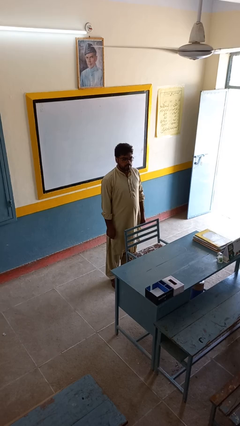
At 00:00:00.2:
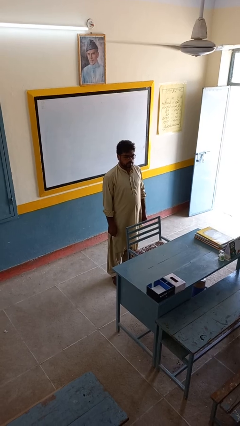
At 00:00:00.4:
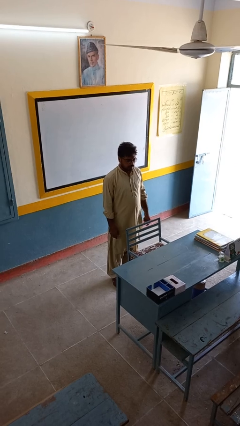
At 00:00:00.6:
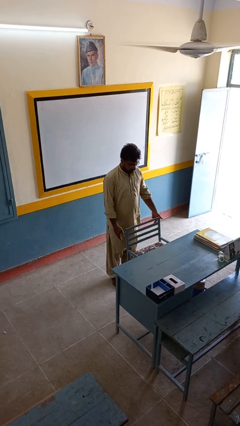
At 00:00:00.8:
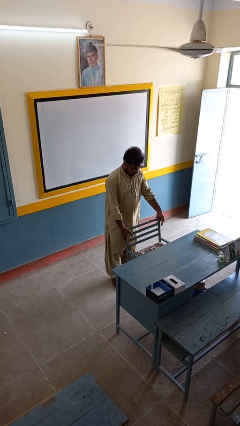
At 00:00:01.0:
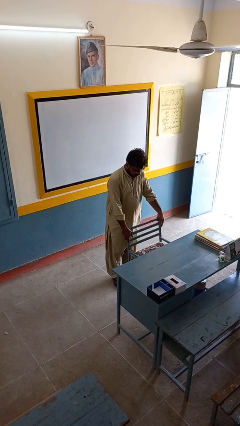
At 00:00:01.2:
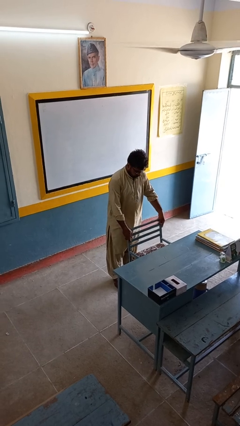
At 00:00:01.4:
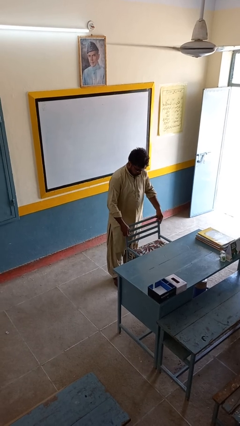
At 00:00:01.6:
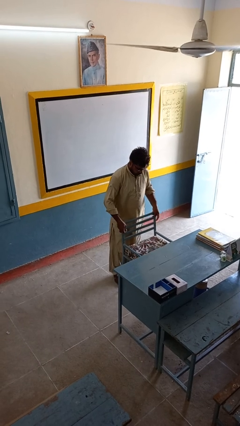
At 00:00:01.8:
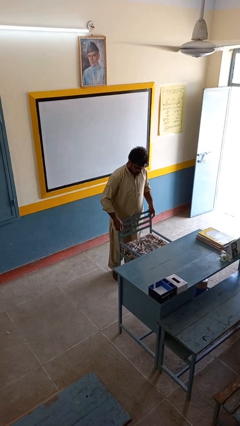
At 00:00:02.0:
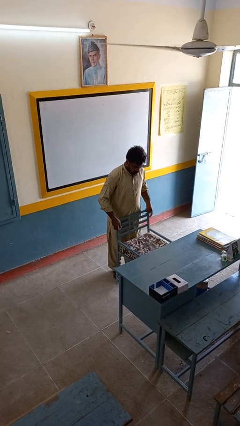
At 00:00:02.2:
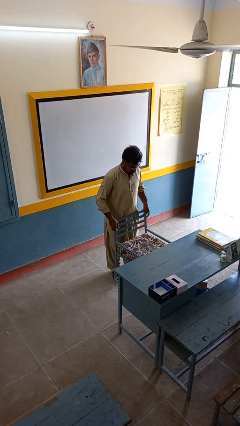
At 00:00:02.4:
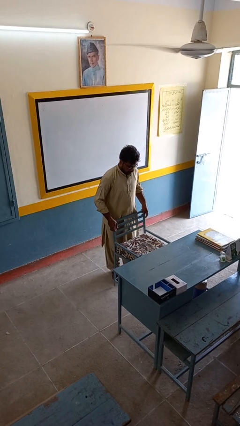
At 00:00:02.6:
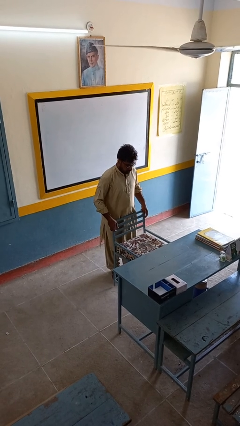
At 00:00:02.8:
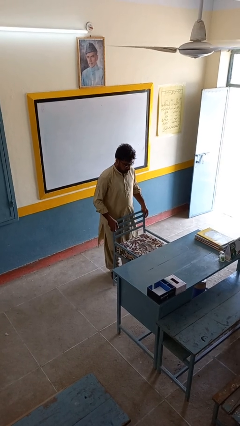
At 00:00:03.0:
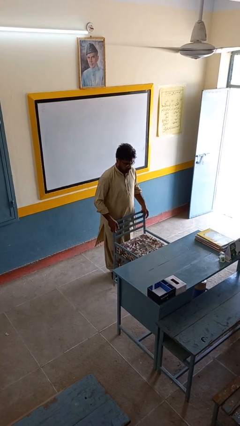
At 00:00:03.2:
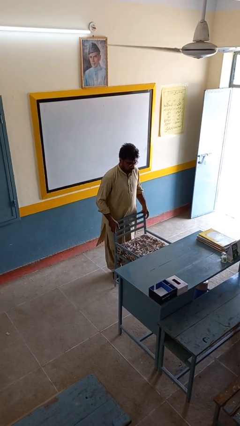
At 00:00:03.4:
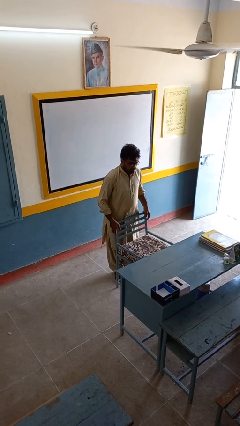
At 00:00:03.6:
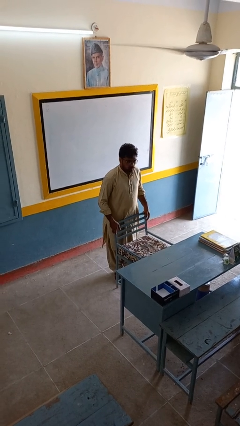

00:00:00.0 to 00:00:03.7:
person pulls out chair

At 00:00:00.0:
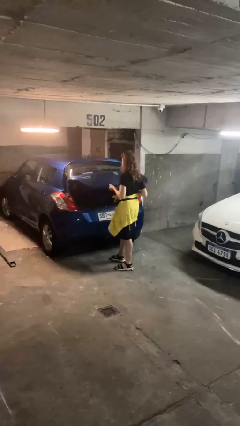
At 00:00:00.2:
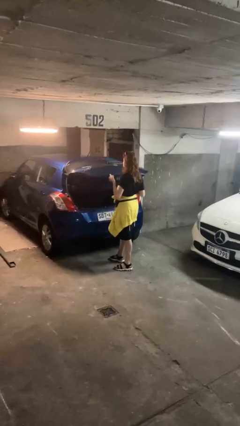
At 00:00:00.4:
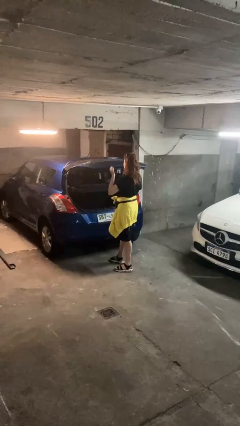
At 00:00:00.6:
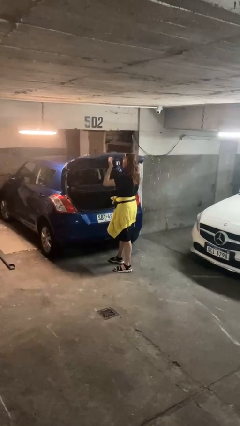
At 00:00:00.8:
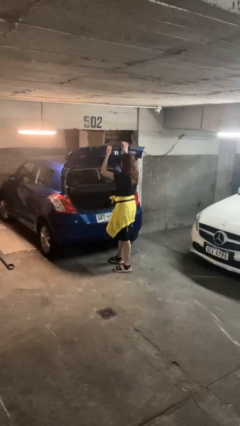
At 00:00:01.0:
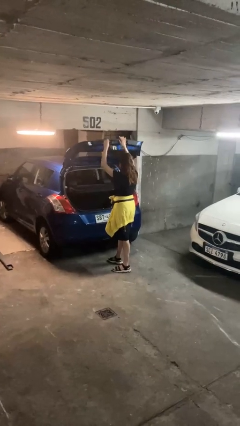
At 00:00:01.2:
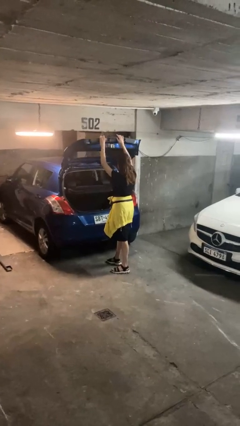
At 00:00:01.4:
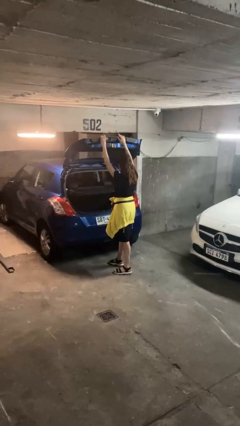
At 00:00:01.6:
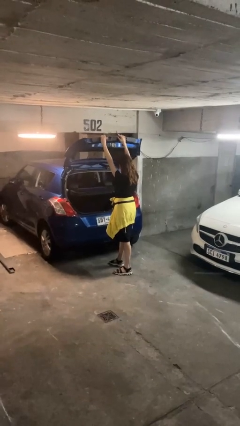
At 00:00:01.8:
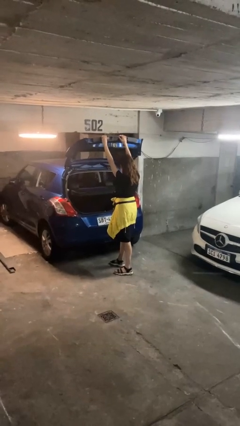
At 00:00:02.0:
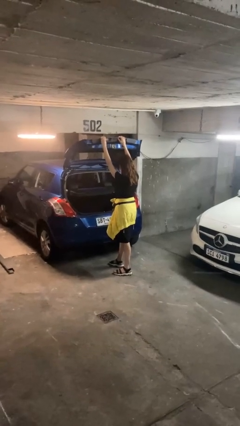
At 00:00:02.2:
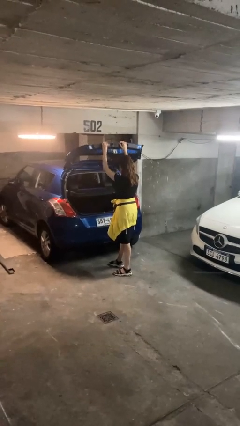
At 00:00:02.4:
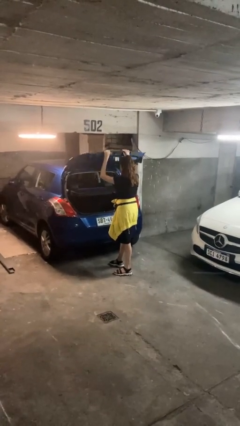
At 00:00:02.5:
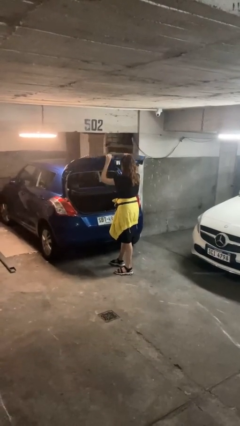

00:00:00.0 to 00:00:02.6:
person opens car trunk

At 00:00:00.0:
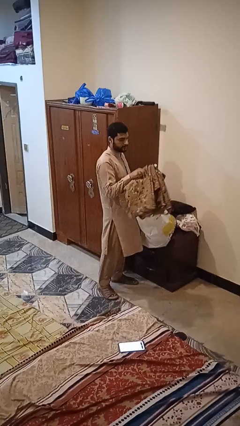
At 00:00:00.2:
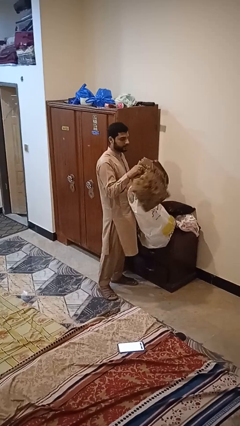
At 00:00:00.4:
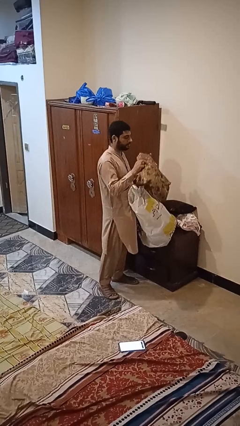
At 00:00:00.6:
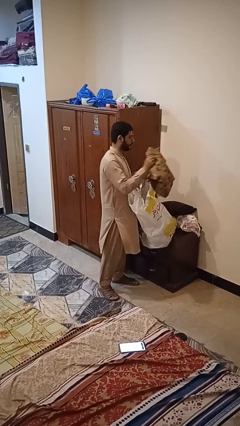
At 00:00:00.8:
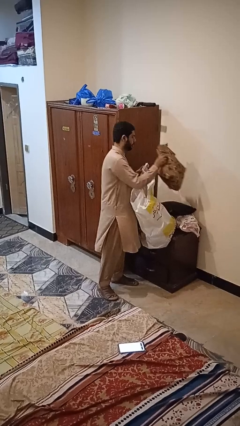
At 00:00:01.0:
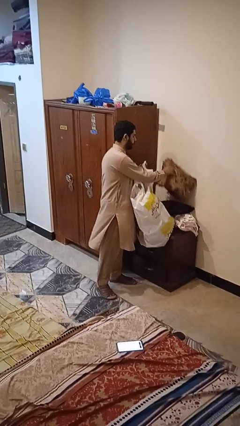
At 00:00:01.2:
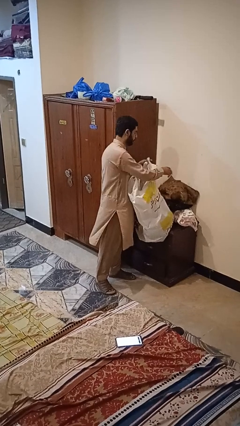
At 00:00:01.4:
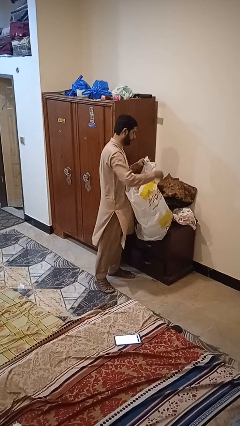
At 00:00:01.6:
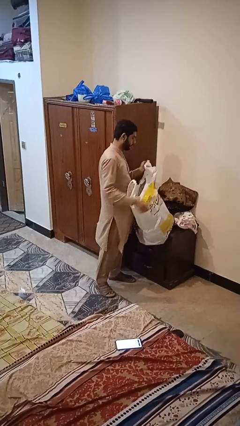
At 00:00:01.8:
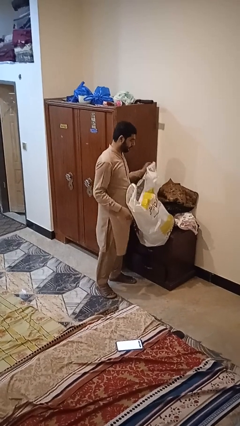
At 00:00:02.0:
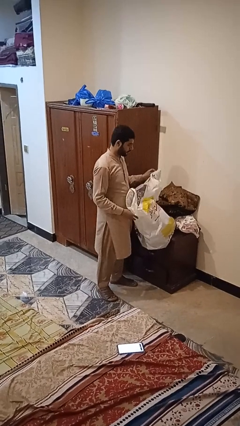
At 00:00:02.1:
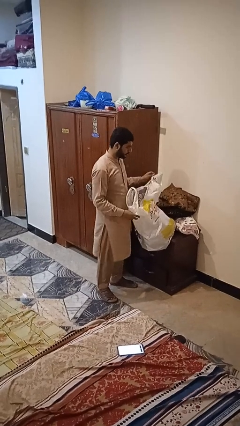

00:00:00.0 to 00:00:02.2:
person puts object into bag

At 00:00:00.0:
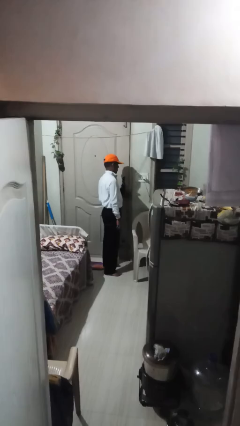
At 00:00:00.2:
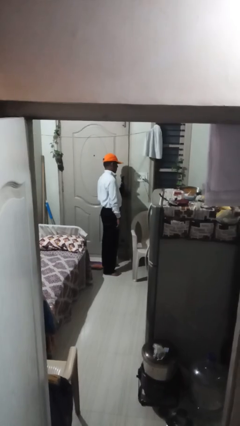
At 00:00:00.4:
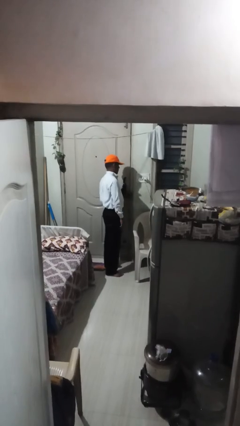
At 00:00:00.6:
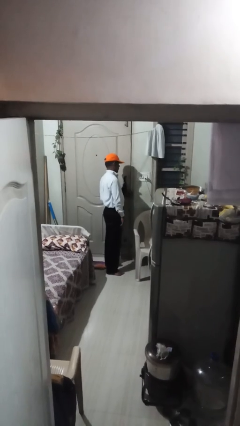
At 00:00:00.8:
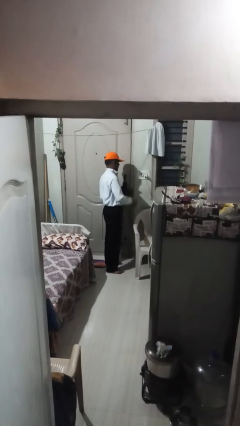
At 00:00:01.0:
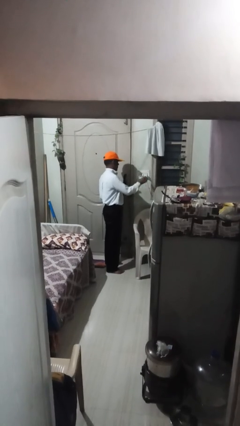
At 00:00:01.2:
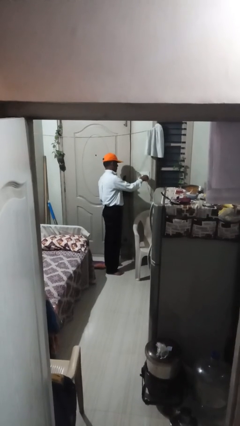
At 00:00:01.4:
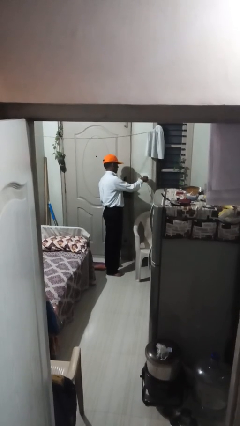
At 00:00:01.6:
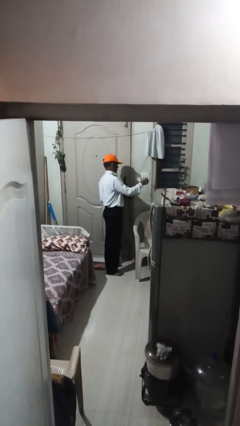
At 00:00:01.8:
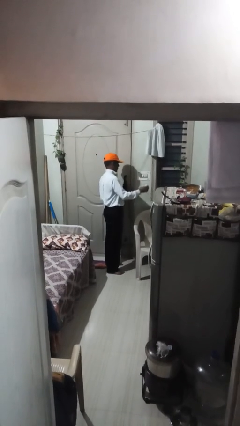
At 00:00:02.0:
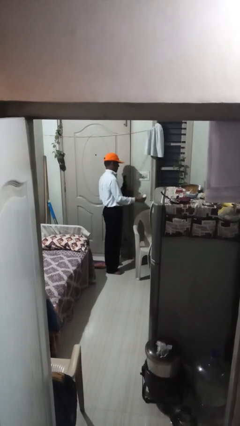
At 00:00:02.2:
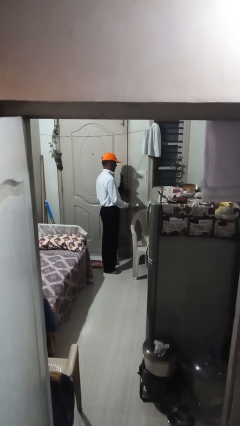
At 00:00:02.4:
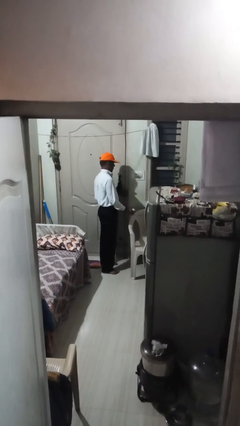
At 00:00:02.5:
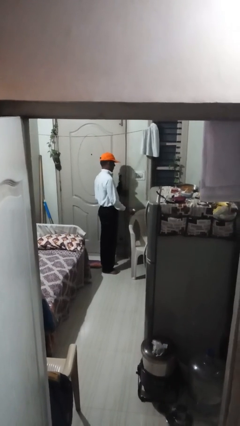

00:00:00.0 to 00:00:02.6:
person unplugs from electrical socket

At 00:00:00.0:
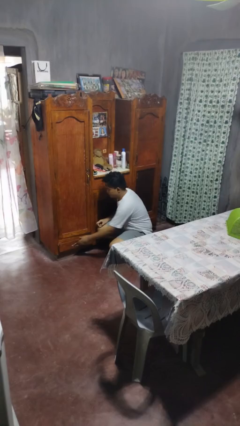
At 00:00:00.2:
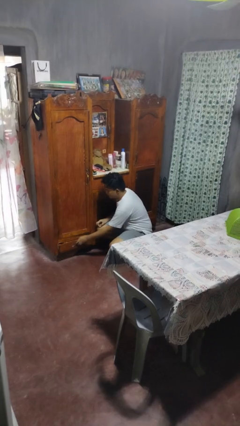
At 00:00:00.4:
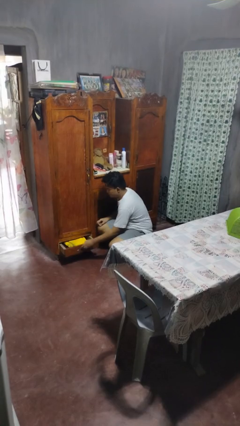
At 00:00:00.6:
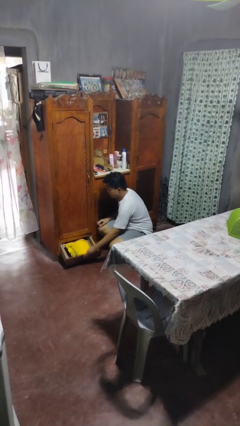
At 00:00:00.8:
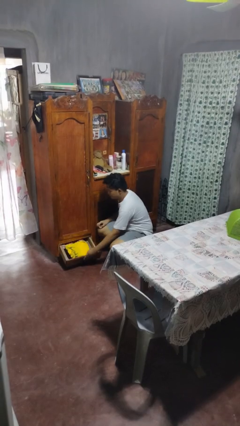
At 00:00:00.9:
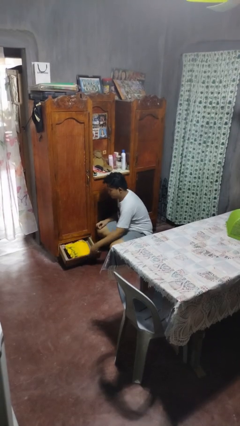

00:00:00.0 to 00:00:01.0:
person opens dresser drawer

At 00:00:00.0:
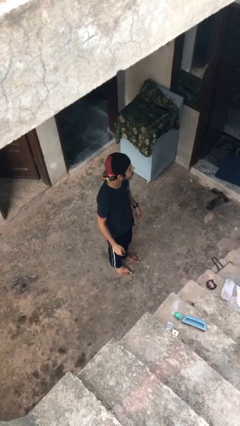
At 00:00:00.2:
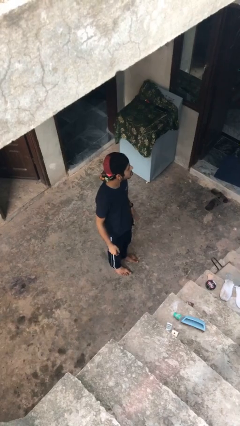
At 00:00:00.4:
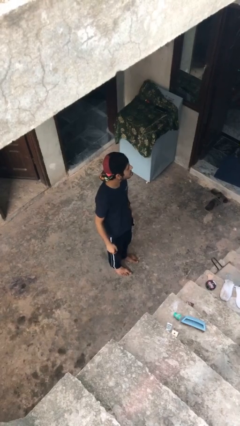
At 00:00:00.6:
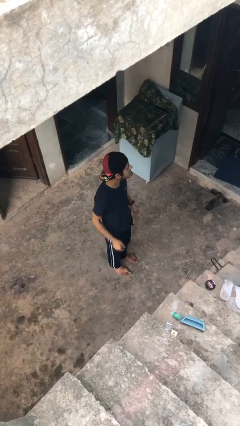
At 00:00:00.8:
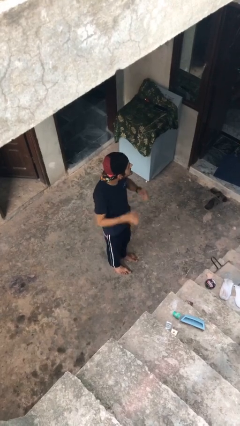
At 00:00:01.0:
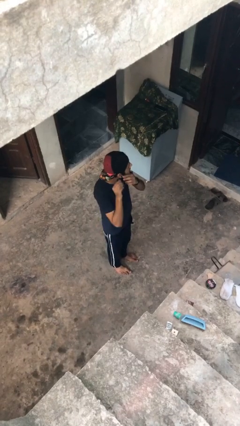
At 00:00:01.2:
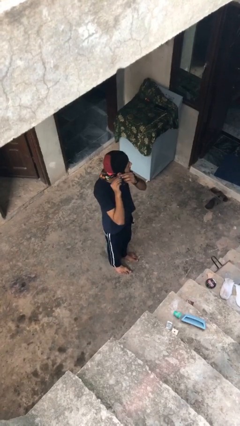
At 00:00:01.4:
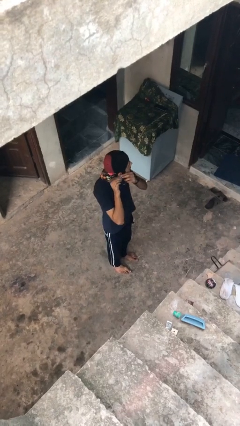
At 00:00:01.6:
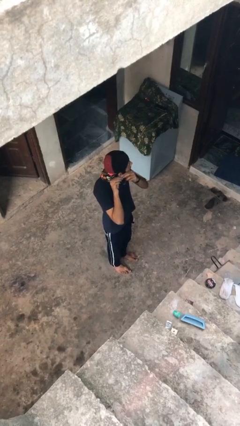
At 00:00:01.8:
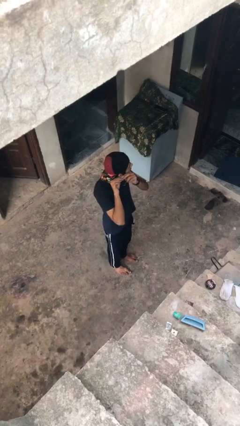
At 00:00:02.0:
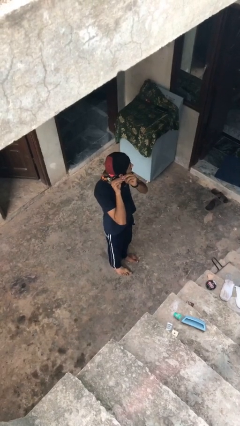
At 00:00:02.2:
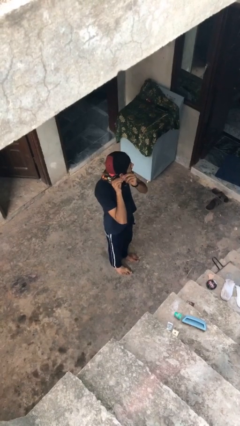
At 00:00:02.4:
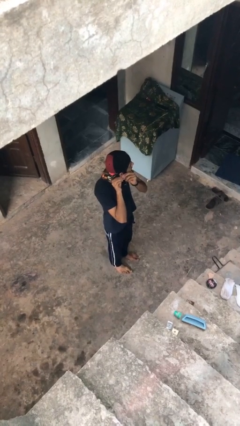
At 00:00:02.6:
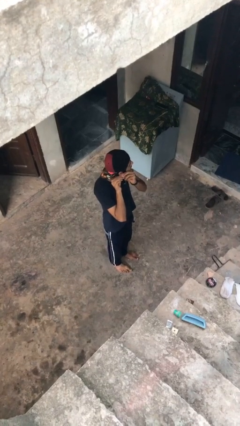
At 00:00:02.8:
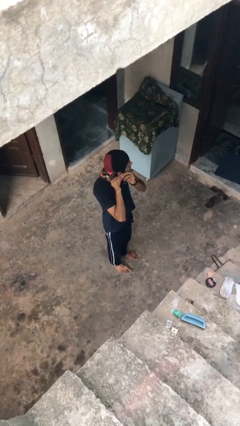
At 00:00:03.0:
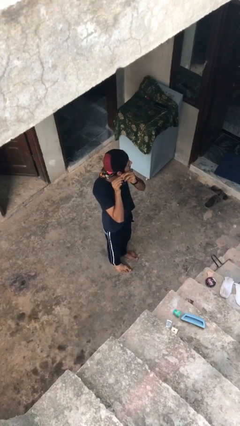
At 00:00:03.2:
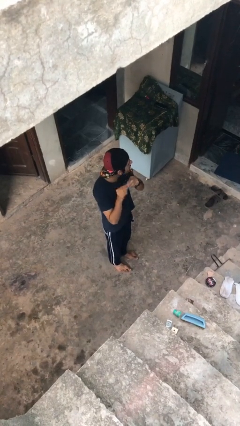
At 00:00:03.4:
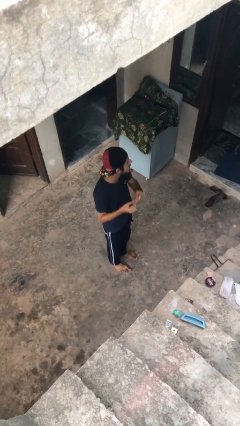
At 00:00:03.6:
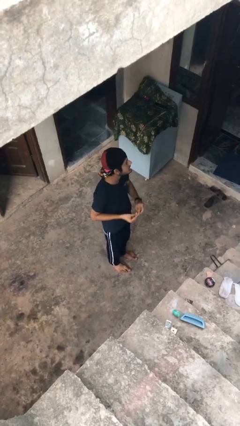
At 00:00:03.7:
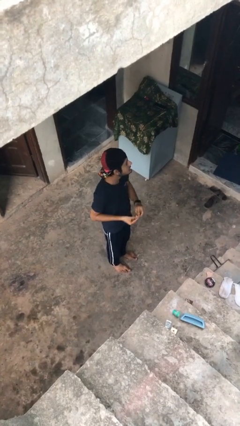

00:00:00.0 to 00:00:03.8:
person takes off earrings

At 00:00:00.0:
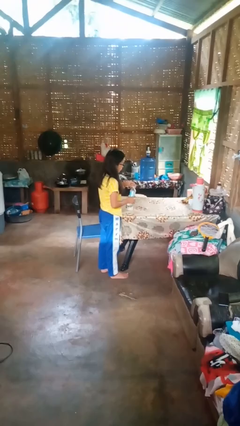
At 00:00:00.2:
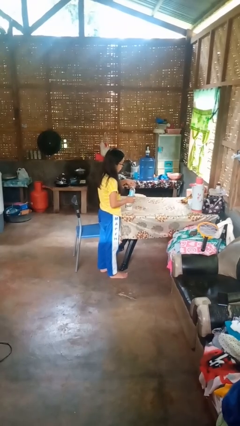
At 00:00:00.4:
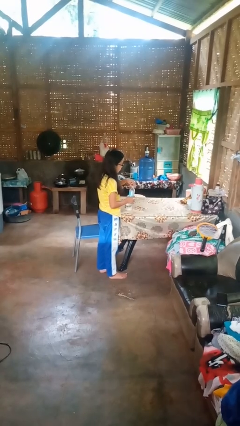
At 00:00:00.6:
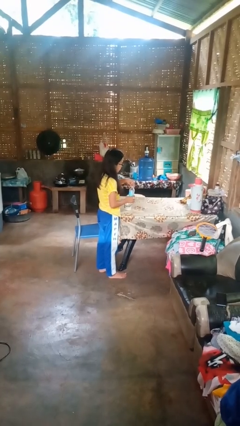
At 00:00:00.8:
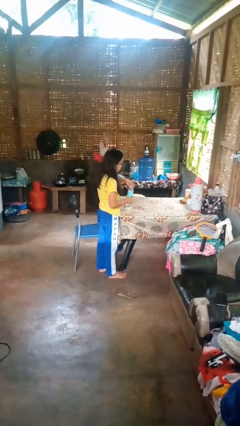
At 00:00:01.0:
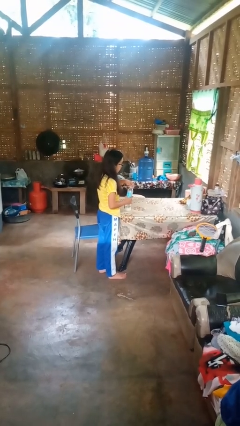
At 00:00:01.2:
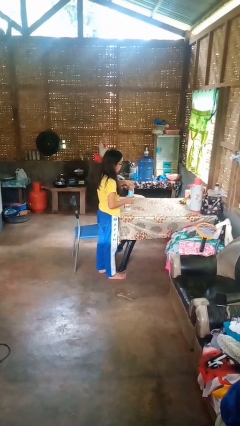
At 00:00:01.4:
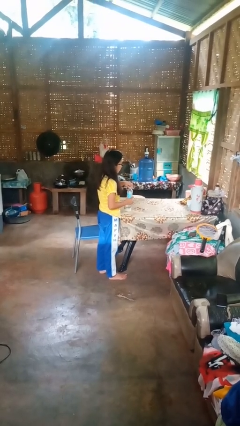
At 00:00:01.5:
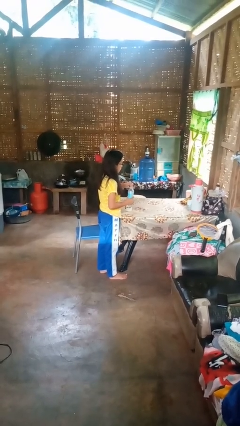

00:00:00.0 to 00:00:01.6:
person screws lid to bottle
